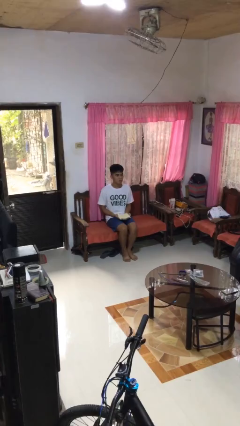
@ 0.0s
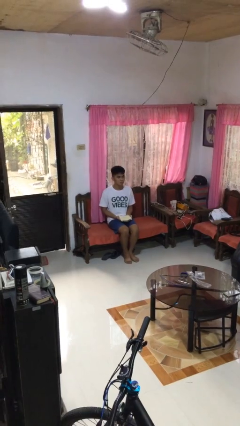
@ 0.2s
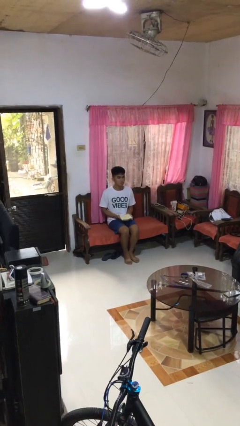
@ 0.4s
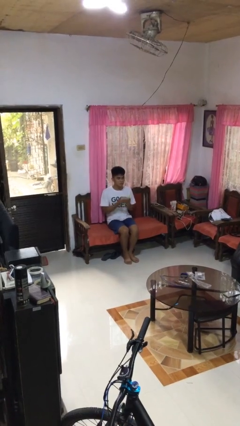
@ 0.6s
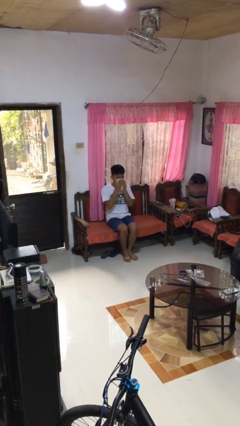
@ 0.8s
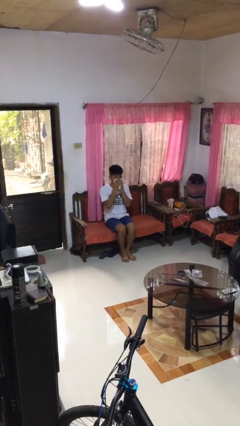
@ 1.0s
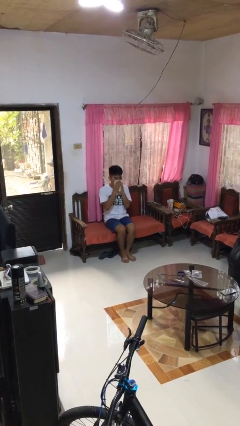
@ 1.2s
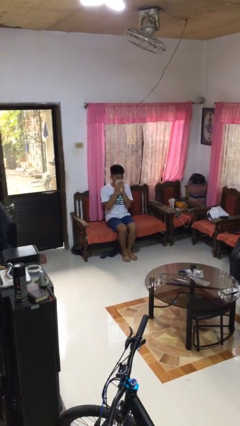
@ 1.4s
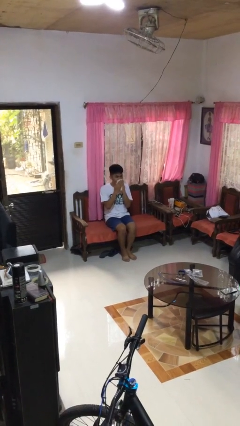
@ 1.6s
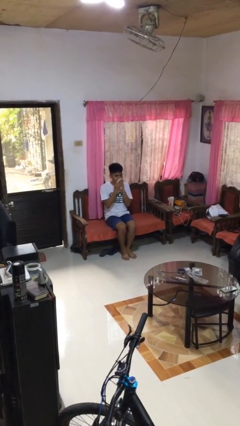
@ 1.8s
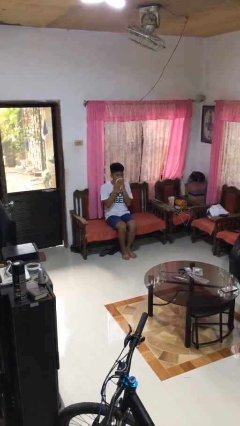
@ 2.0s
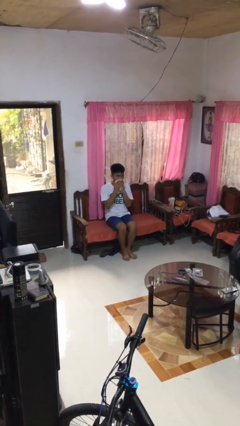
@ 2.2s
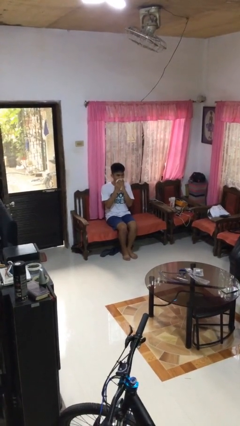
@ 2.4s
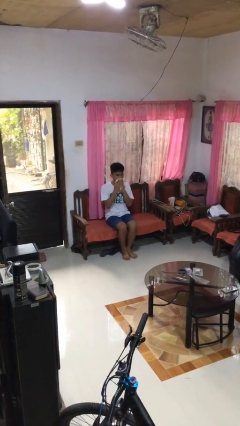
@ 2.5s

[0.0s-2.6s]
person wipes mouth with napkin

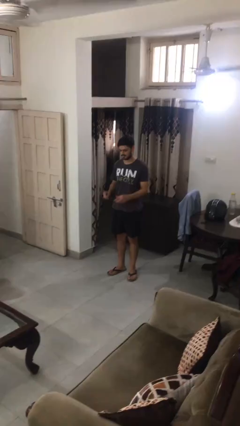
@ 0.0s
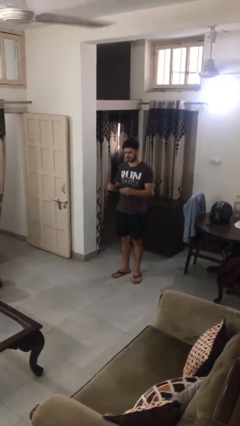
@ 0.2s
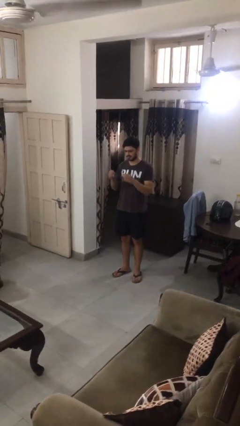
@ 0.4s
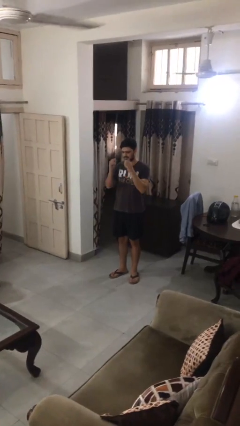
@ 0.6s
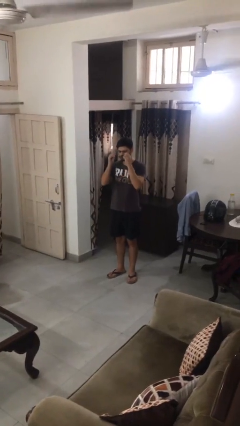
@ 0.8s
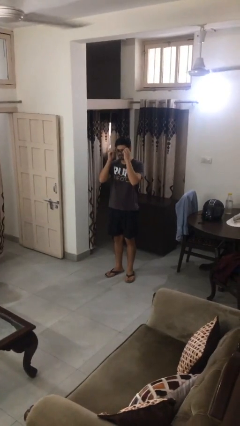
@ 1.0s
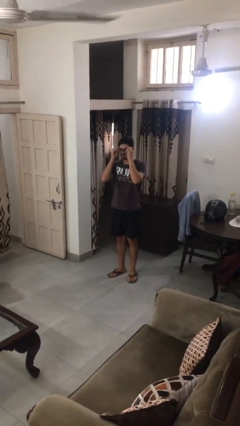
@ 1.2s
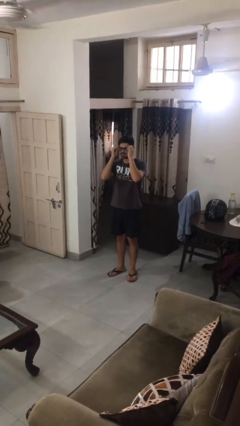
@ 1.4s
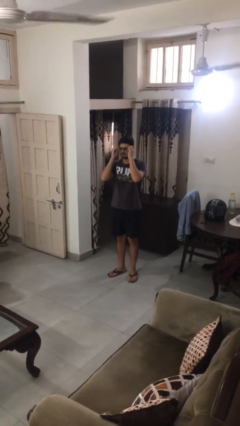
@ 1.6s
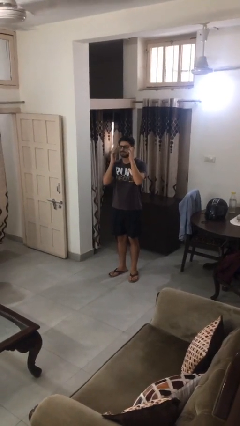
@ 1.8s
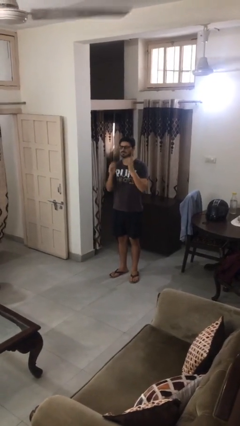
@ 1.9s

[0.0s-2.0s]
person puts on glasses

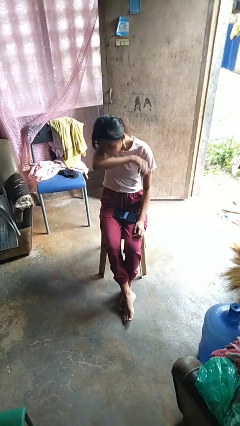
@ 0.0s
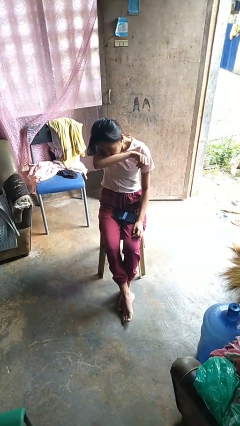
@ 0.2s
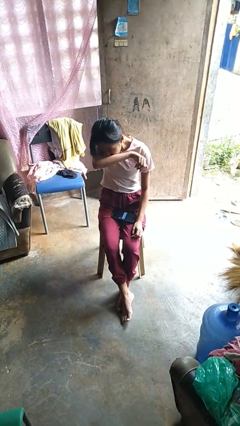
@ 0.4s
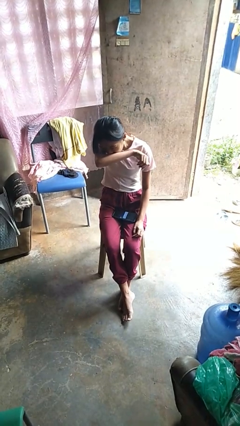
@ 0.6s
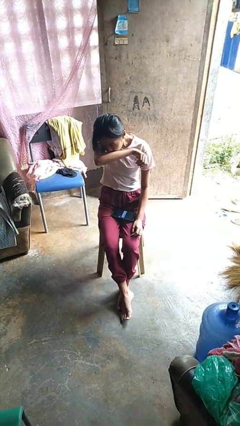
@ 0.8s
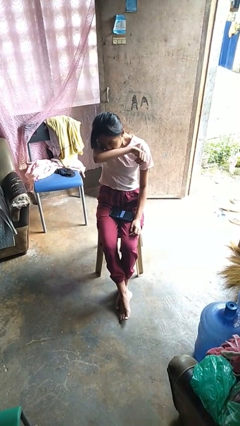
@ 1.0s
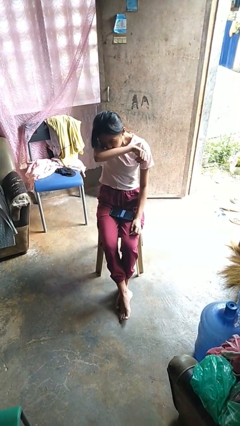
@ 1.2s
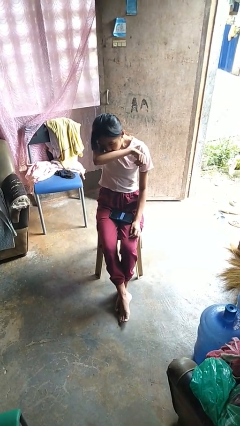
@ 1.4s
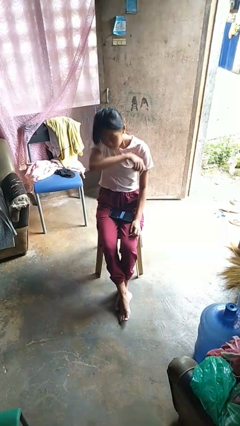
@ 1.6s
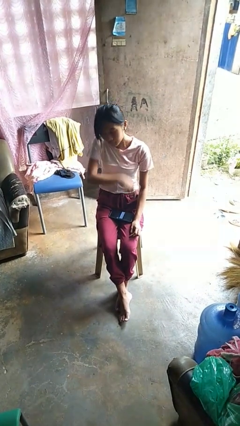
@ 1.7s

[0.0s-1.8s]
person sneezes into arm

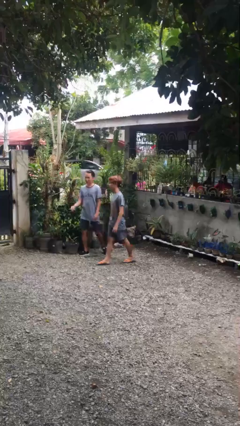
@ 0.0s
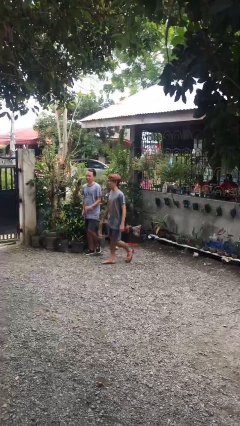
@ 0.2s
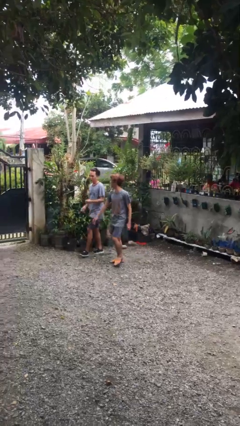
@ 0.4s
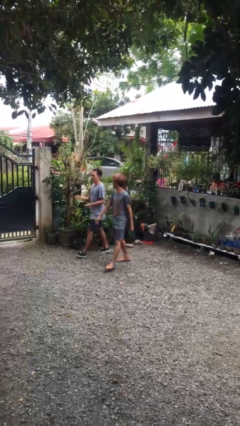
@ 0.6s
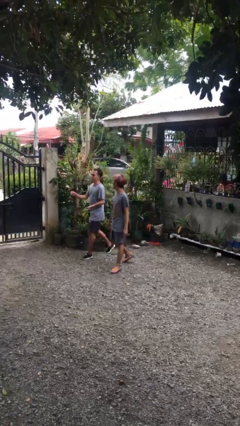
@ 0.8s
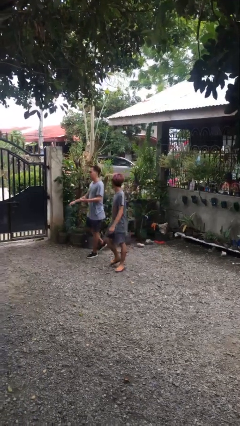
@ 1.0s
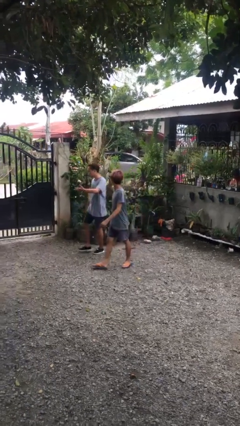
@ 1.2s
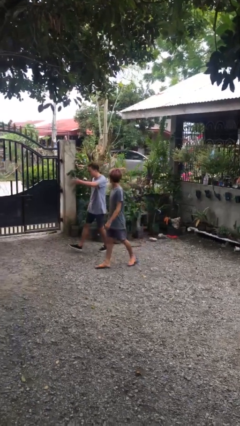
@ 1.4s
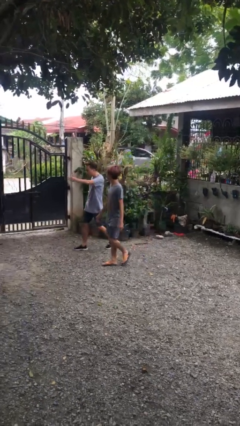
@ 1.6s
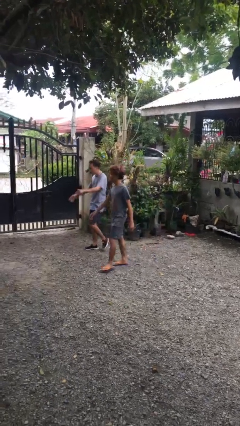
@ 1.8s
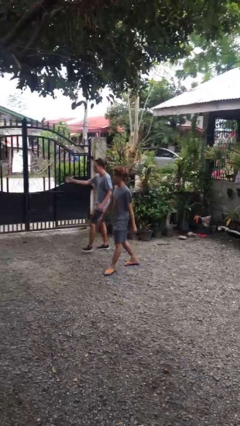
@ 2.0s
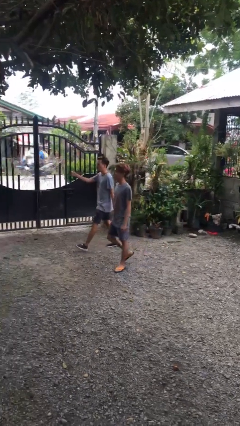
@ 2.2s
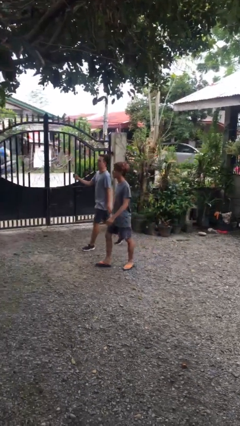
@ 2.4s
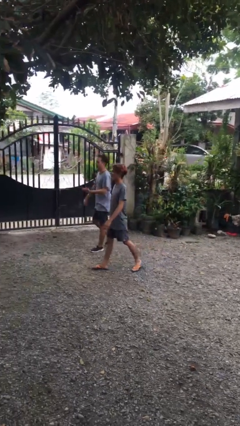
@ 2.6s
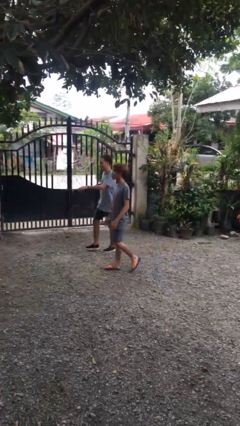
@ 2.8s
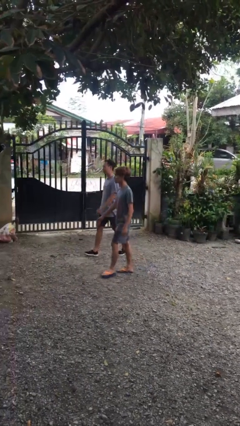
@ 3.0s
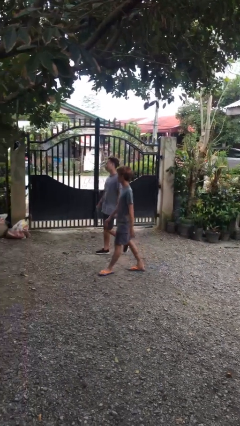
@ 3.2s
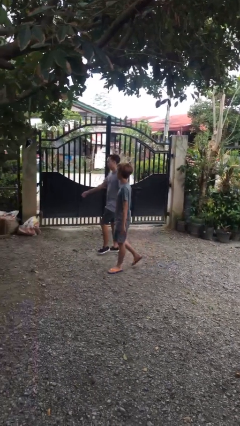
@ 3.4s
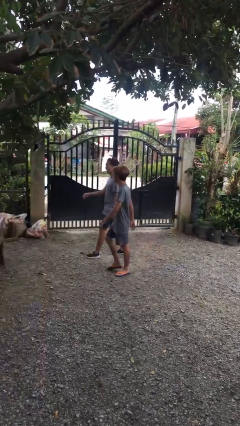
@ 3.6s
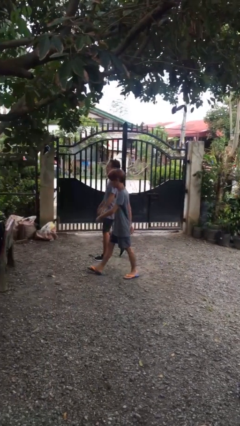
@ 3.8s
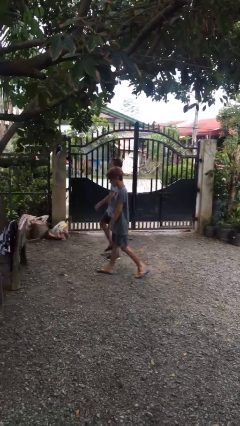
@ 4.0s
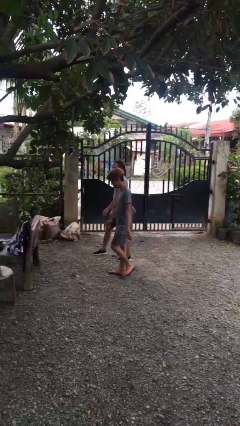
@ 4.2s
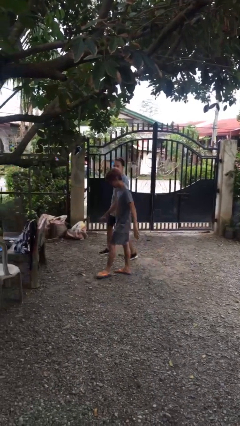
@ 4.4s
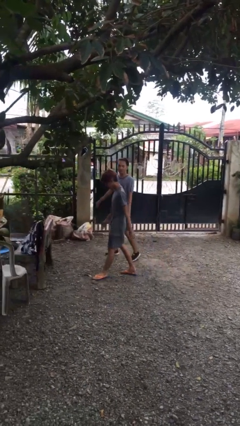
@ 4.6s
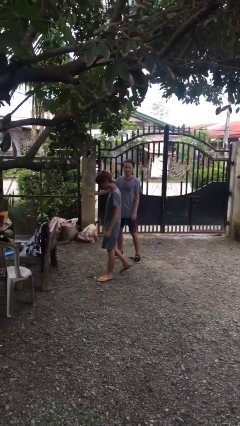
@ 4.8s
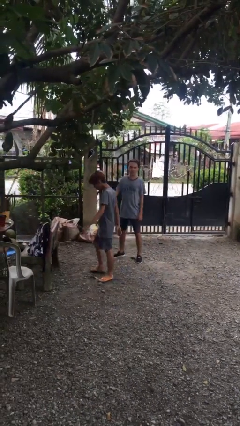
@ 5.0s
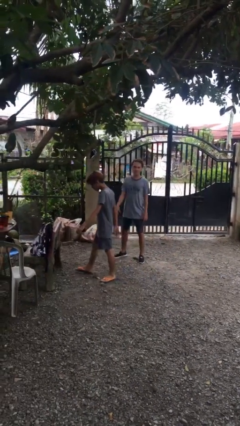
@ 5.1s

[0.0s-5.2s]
person talks to person

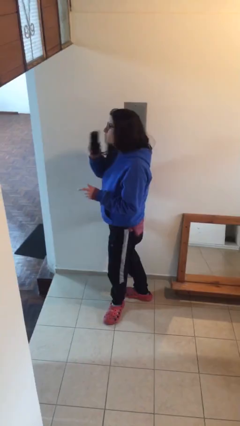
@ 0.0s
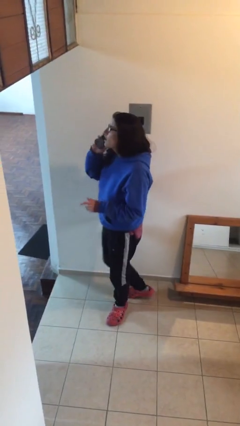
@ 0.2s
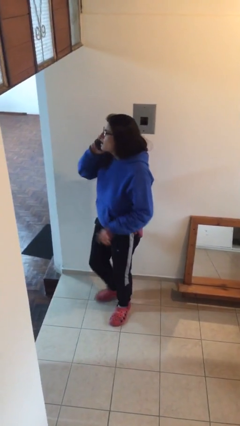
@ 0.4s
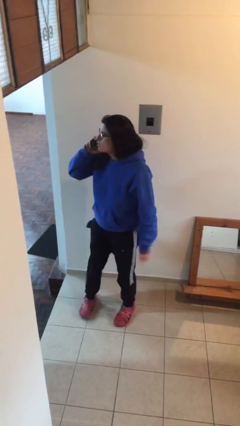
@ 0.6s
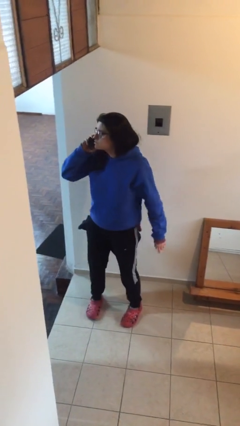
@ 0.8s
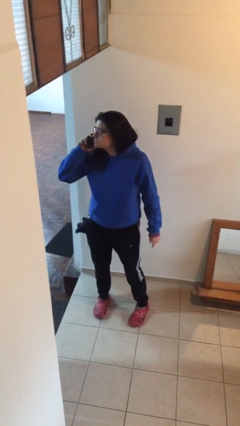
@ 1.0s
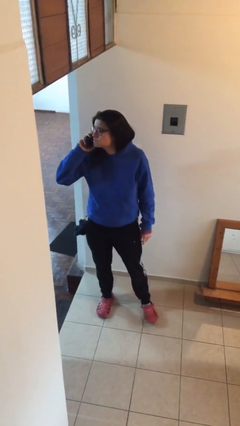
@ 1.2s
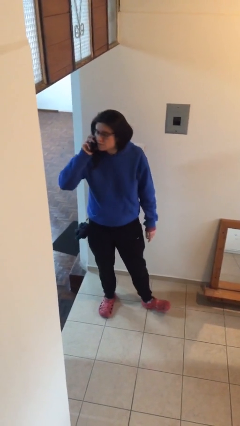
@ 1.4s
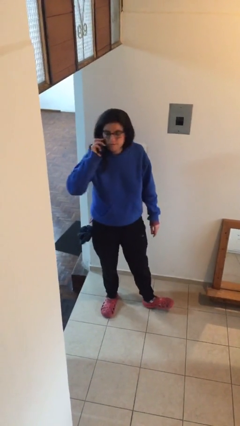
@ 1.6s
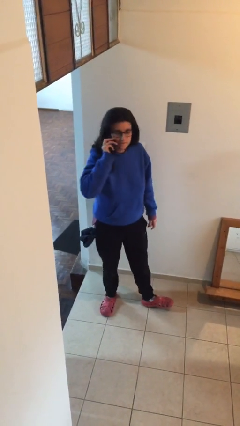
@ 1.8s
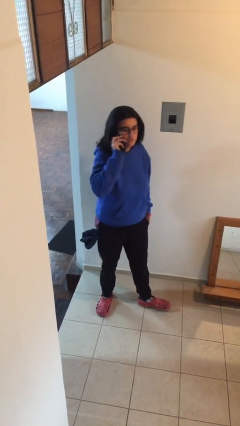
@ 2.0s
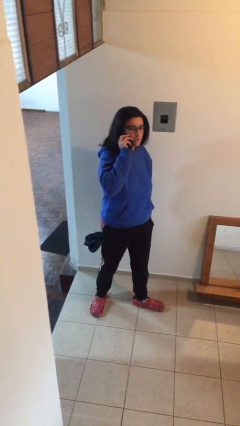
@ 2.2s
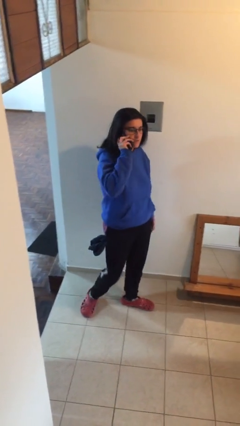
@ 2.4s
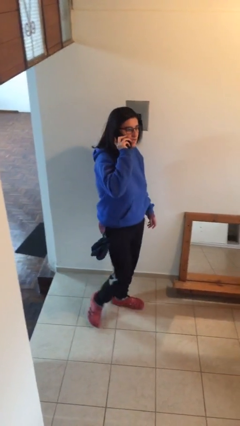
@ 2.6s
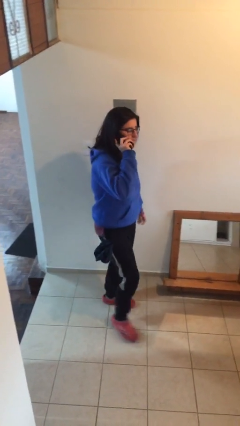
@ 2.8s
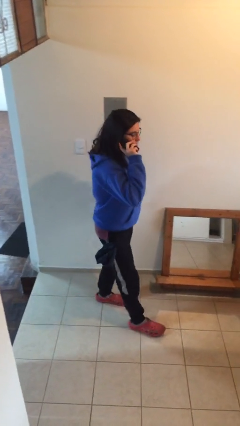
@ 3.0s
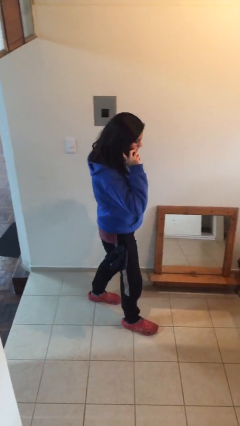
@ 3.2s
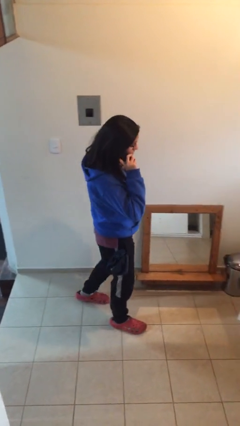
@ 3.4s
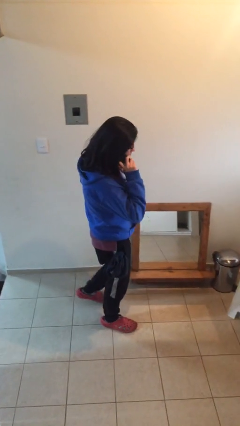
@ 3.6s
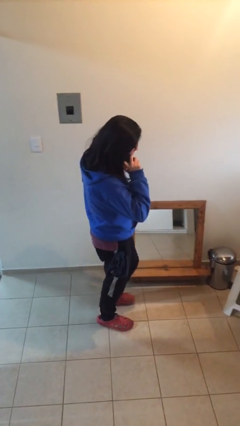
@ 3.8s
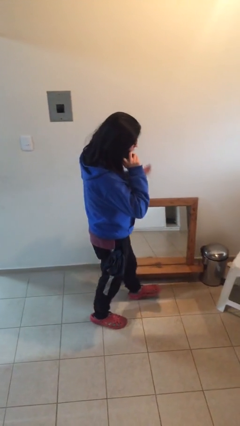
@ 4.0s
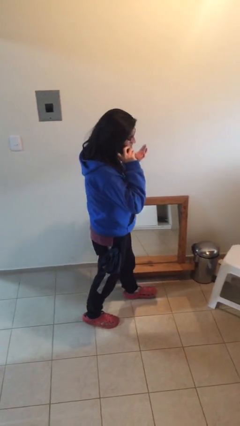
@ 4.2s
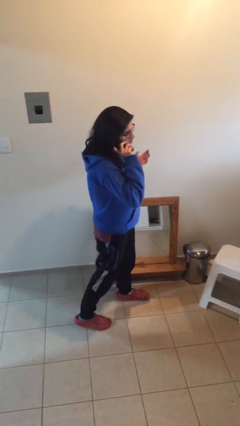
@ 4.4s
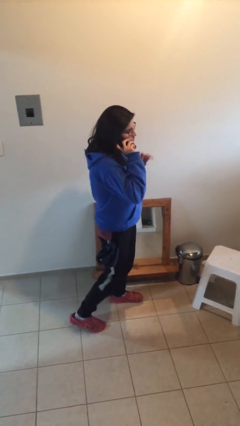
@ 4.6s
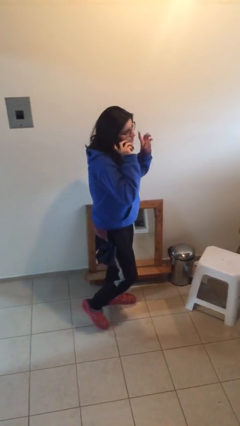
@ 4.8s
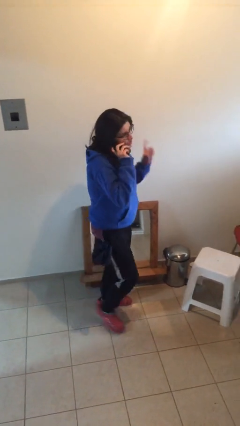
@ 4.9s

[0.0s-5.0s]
person talks on phone

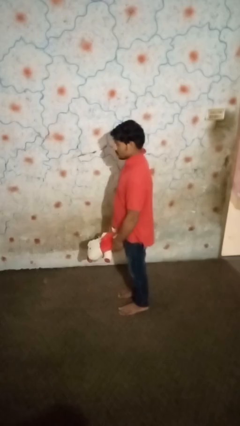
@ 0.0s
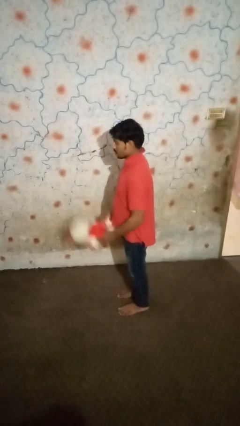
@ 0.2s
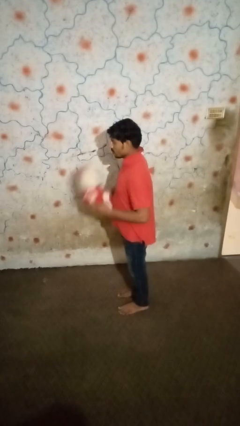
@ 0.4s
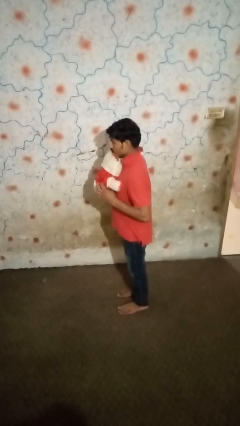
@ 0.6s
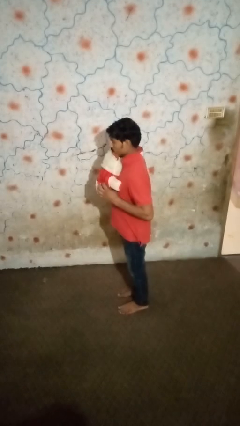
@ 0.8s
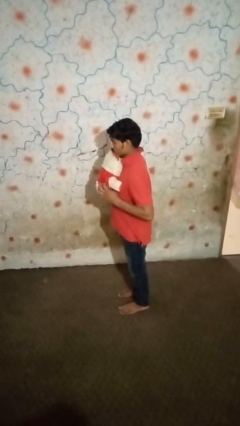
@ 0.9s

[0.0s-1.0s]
person hugs stuffed animal
